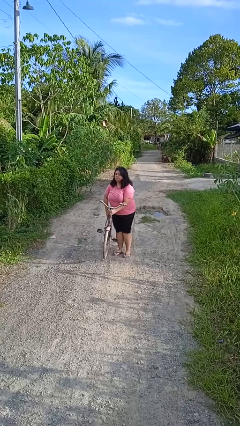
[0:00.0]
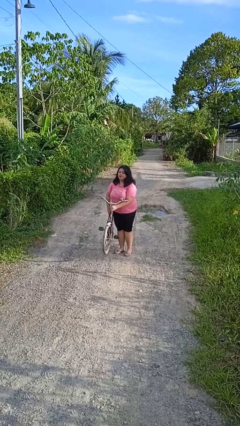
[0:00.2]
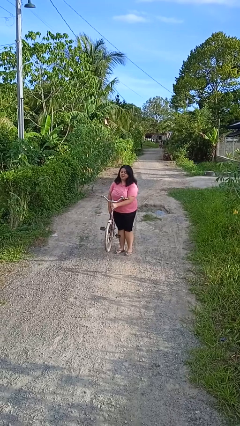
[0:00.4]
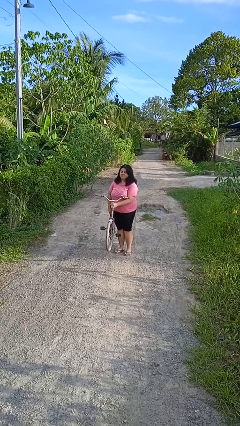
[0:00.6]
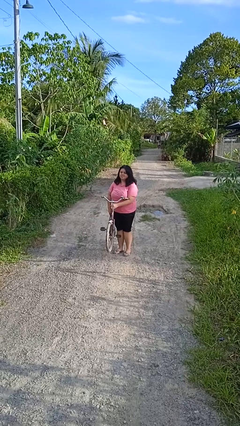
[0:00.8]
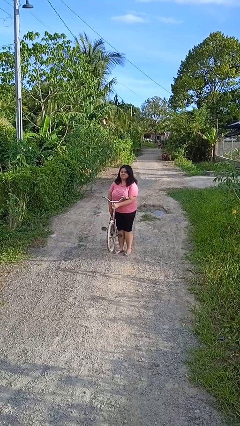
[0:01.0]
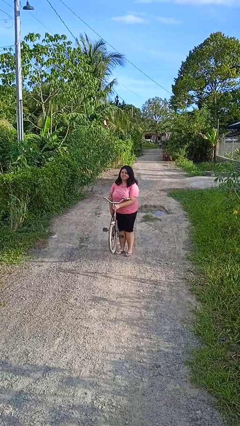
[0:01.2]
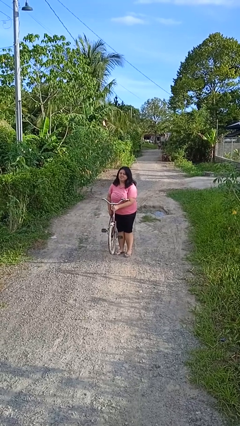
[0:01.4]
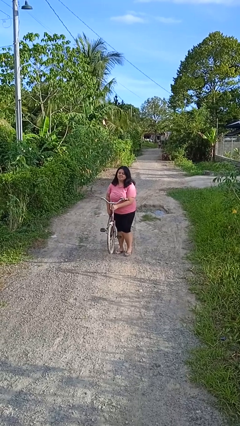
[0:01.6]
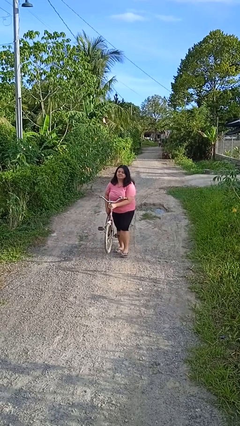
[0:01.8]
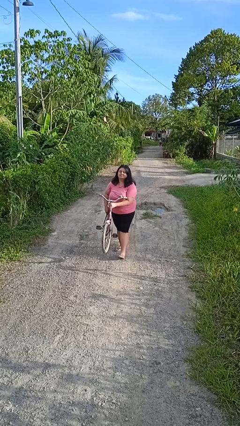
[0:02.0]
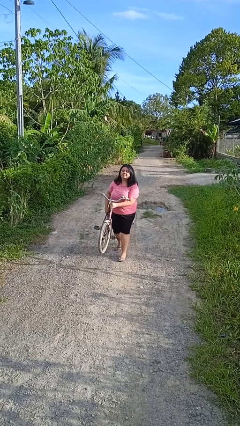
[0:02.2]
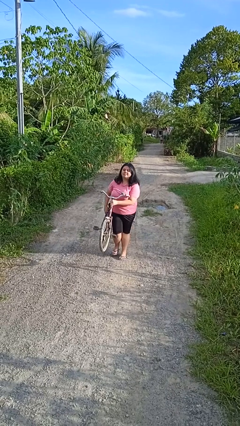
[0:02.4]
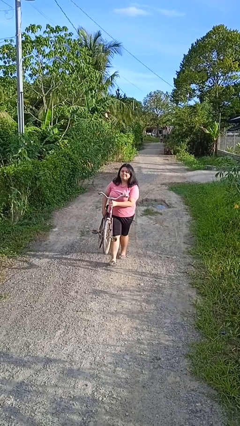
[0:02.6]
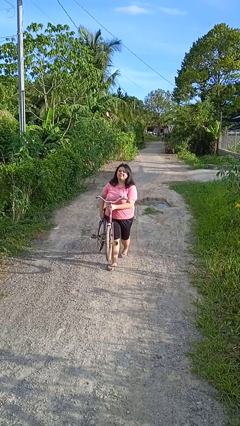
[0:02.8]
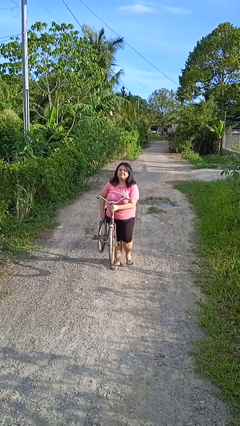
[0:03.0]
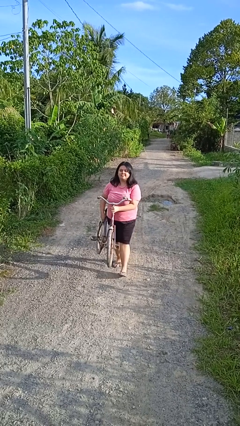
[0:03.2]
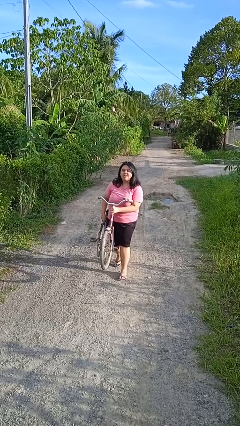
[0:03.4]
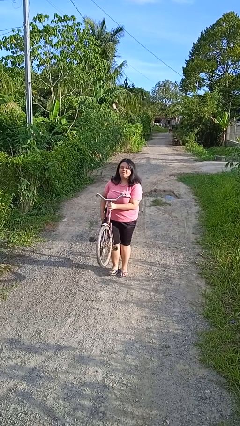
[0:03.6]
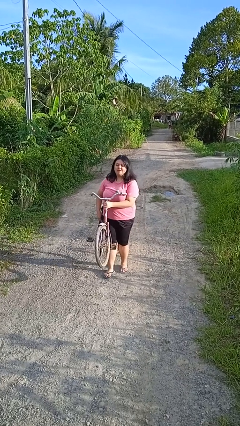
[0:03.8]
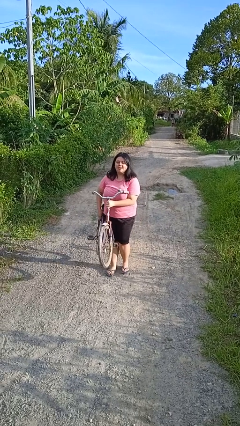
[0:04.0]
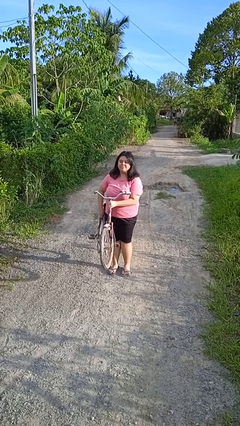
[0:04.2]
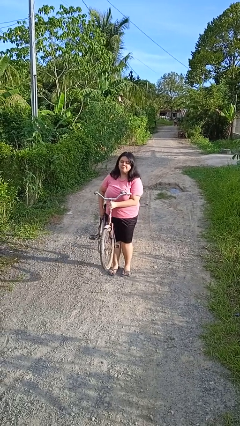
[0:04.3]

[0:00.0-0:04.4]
person carries bicycle

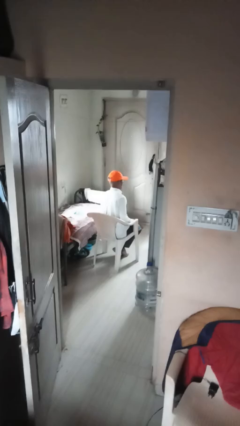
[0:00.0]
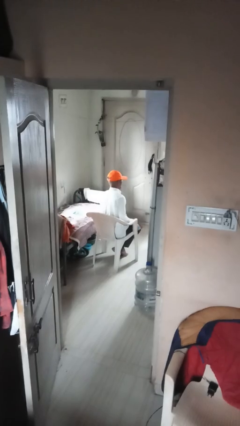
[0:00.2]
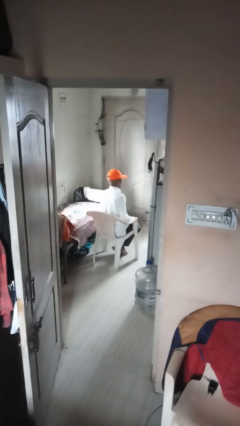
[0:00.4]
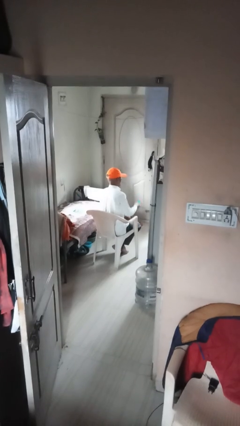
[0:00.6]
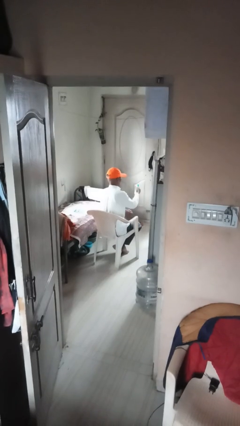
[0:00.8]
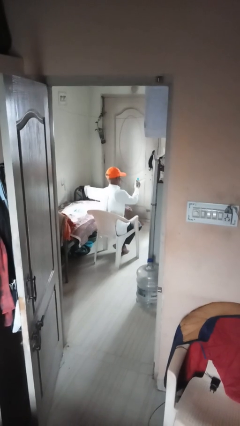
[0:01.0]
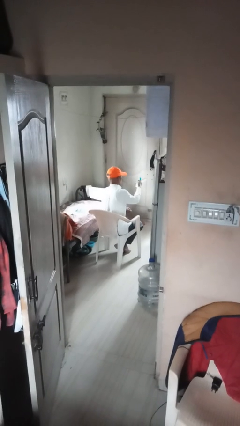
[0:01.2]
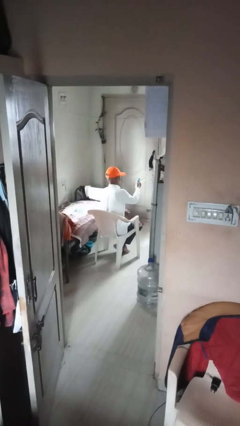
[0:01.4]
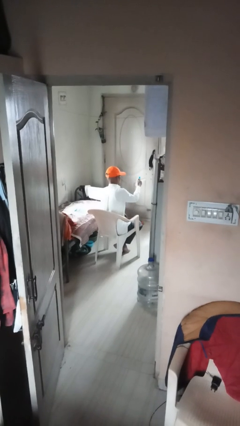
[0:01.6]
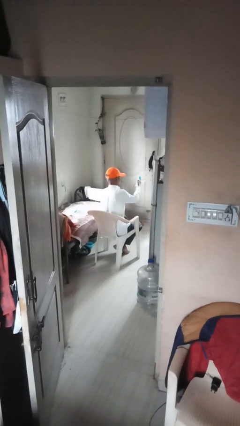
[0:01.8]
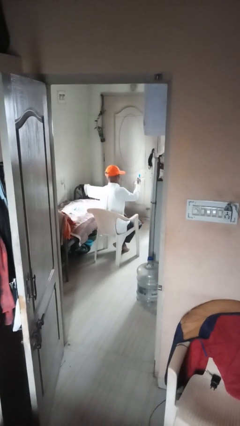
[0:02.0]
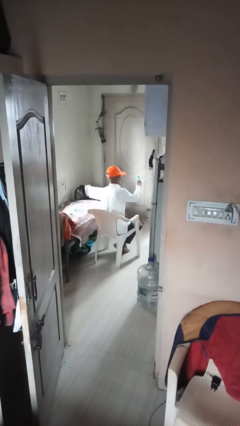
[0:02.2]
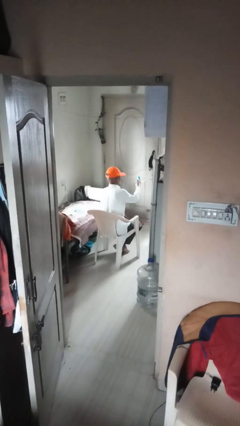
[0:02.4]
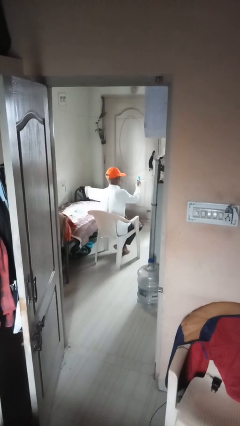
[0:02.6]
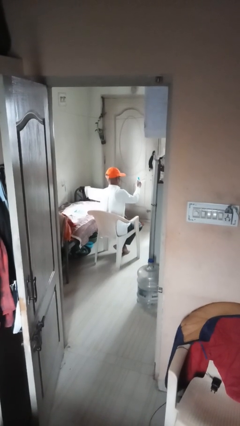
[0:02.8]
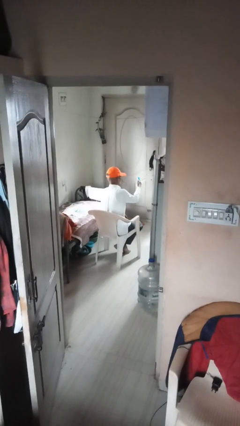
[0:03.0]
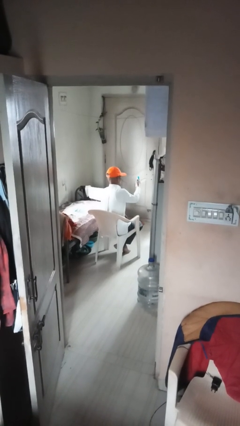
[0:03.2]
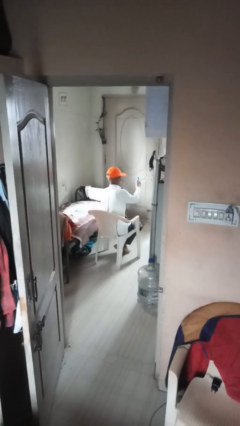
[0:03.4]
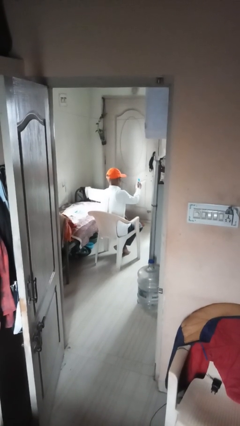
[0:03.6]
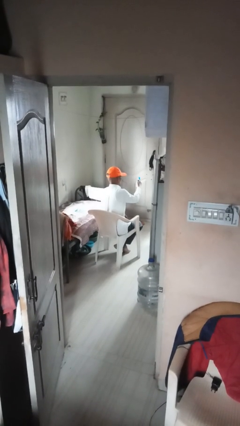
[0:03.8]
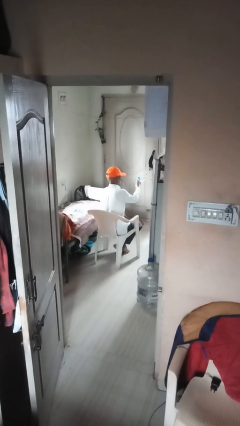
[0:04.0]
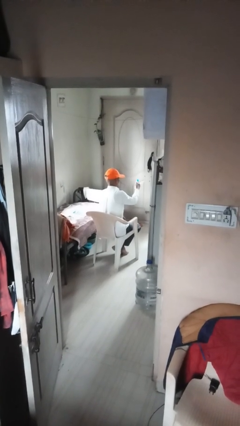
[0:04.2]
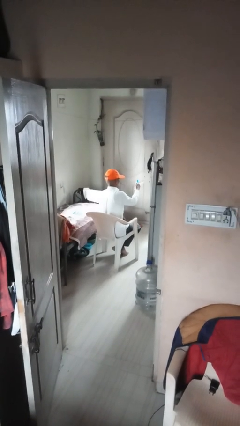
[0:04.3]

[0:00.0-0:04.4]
person squeezes object

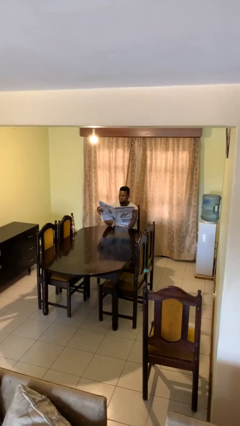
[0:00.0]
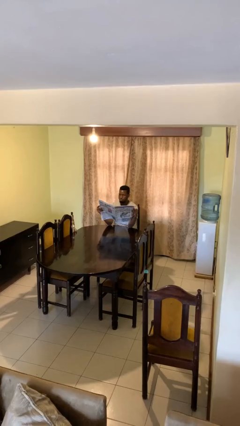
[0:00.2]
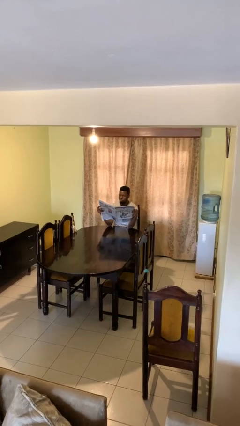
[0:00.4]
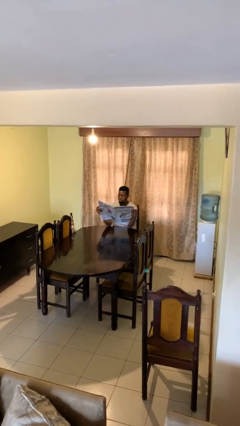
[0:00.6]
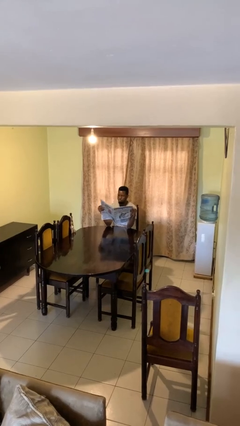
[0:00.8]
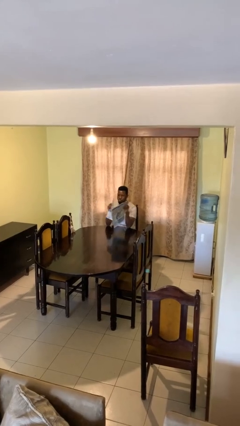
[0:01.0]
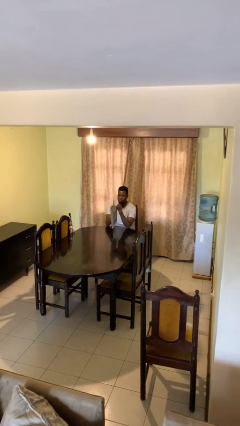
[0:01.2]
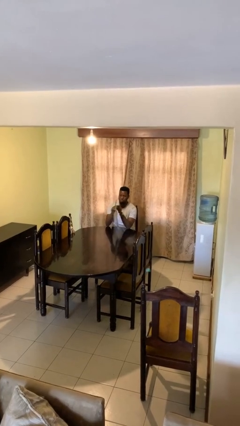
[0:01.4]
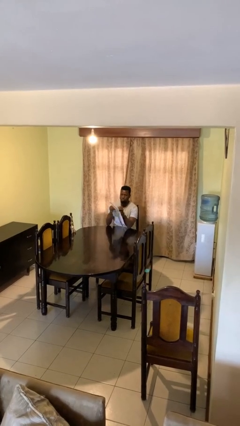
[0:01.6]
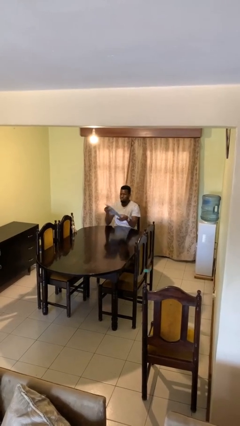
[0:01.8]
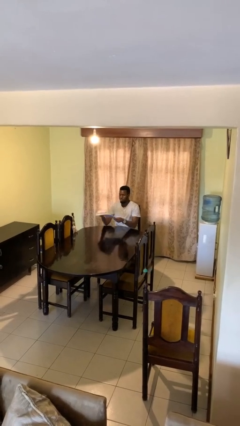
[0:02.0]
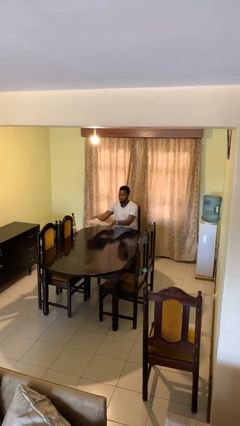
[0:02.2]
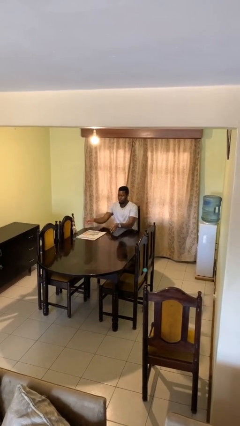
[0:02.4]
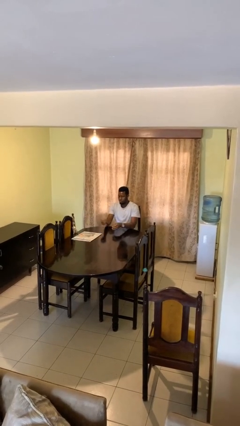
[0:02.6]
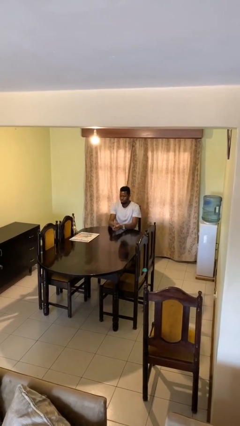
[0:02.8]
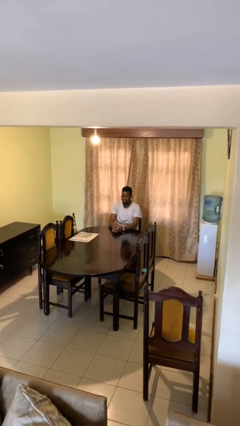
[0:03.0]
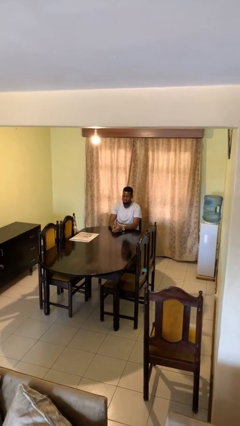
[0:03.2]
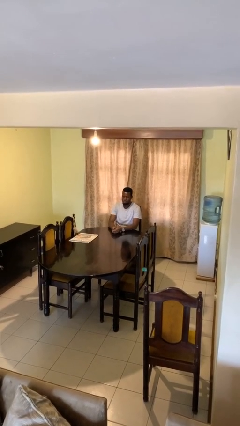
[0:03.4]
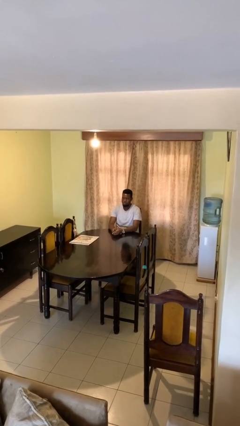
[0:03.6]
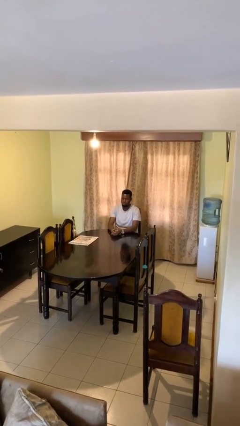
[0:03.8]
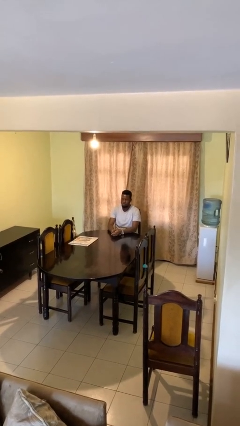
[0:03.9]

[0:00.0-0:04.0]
person puts down object on table

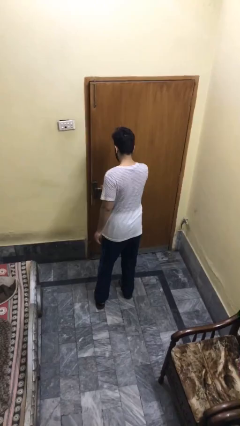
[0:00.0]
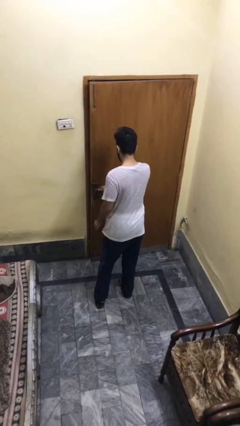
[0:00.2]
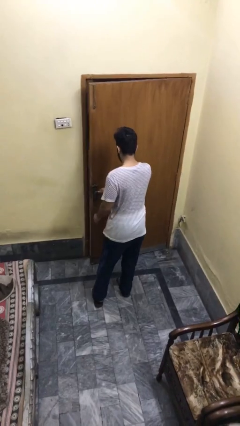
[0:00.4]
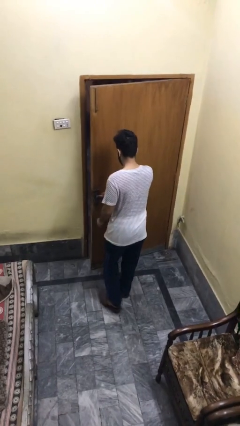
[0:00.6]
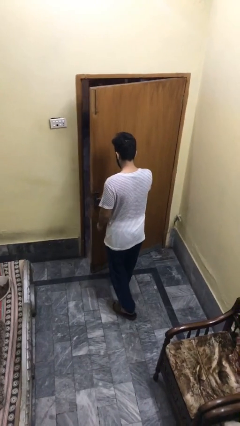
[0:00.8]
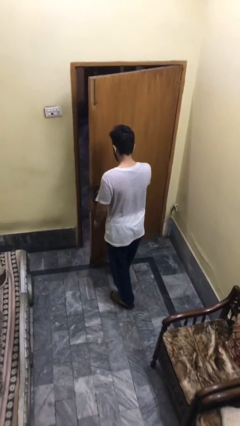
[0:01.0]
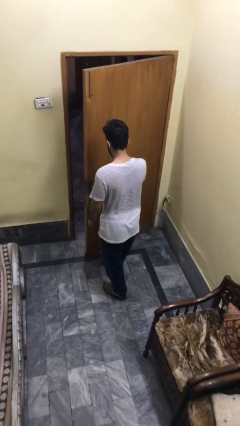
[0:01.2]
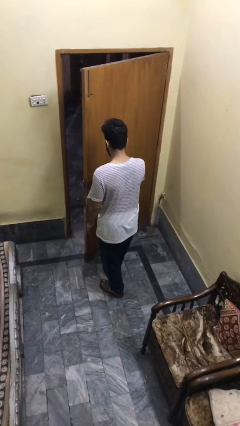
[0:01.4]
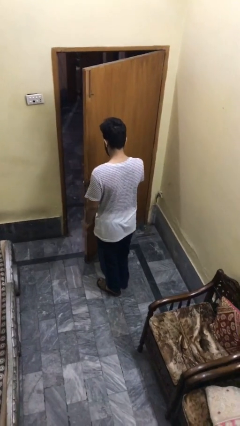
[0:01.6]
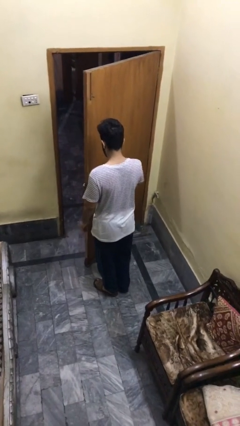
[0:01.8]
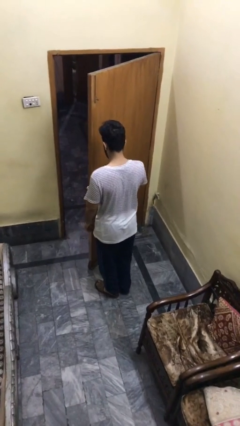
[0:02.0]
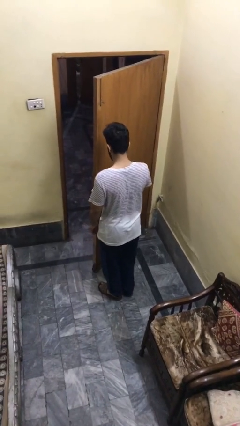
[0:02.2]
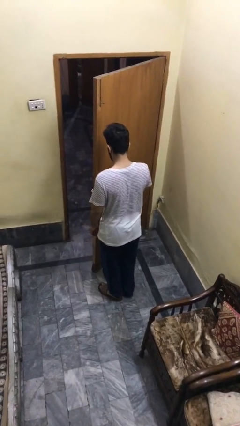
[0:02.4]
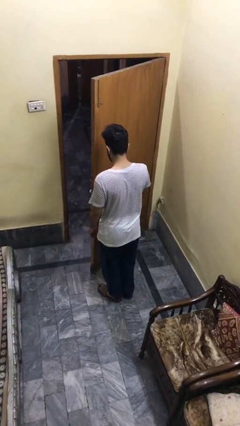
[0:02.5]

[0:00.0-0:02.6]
person opens facility door

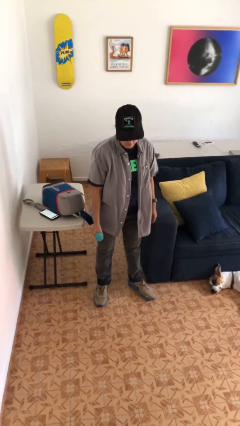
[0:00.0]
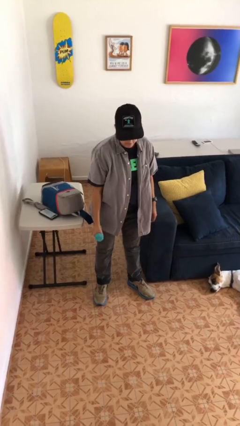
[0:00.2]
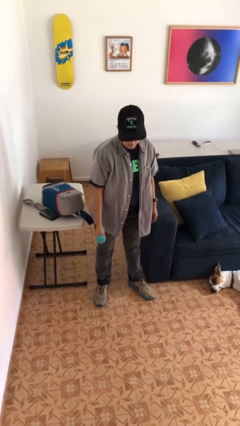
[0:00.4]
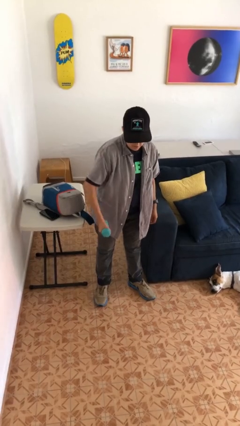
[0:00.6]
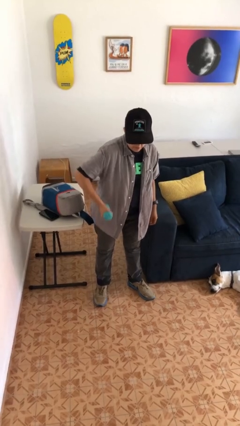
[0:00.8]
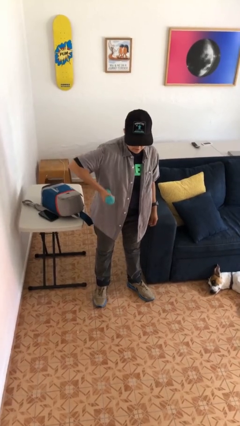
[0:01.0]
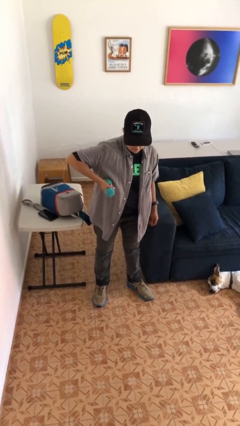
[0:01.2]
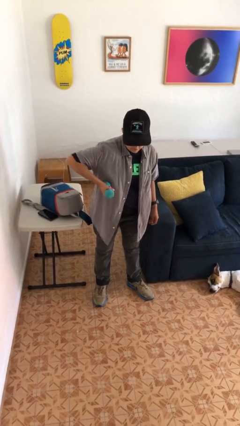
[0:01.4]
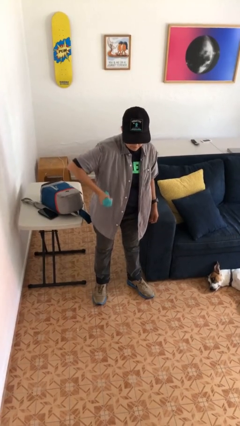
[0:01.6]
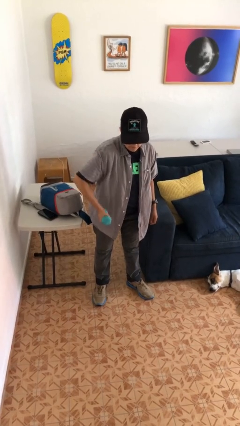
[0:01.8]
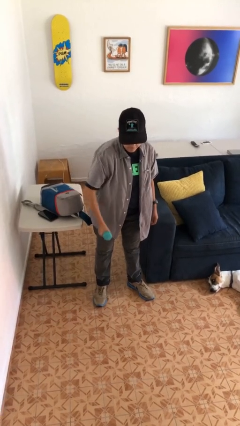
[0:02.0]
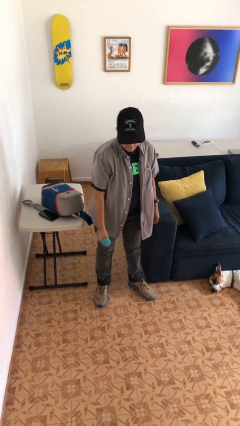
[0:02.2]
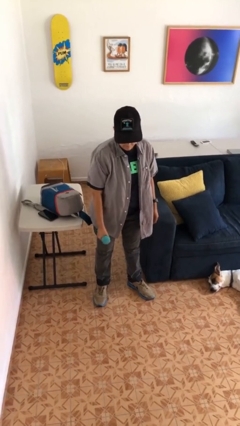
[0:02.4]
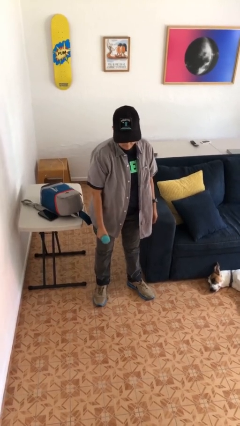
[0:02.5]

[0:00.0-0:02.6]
person lifts dumbbells
